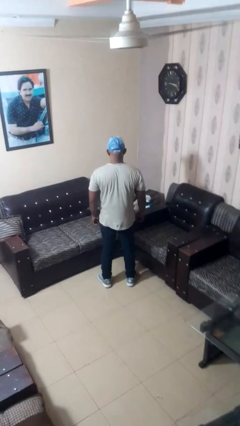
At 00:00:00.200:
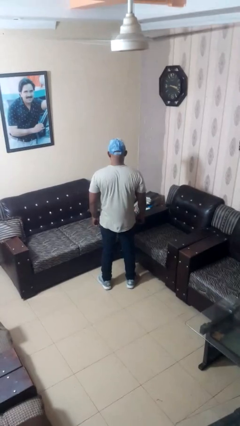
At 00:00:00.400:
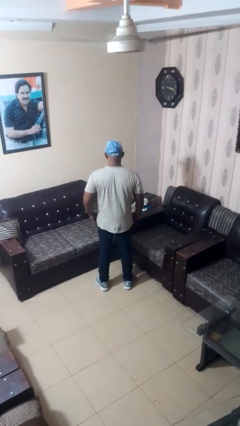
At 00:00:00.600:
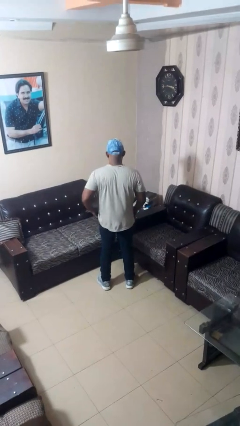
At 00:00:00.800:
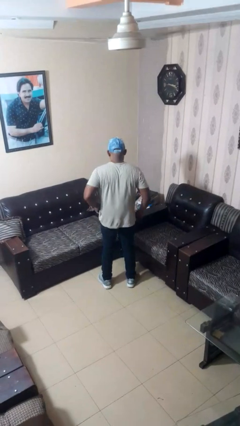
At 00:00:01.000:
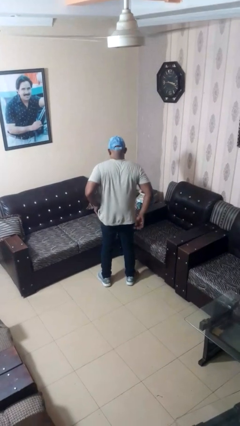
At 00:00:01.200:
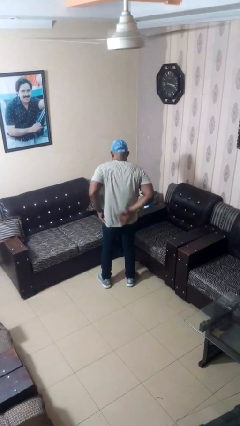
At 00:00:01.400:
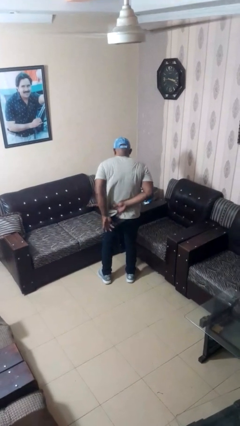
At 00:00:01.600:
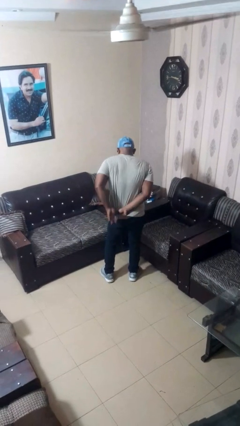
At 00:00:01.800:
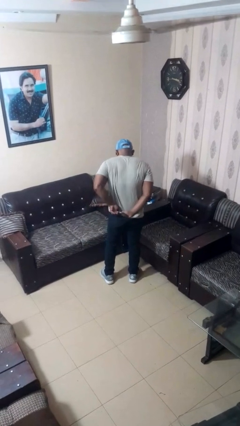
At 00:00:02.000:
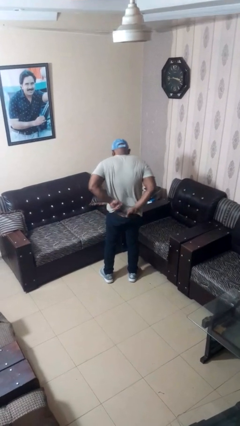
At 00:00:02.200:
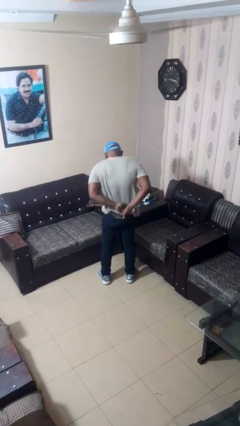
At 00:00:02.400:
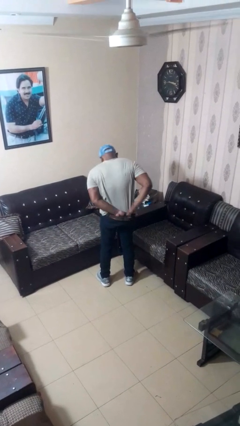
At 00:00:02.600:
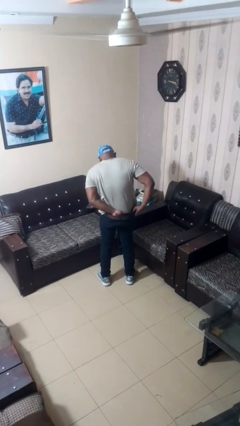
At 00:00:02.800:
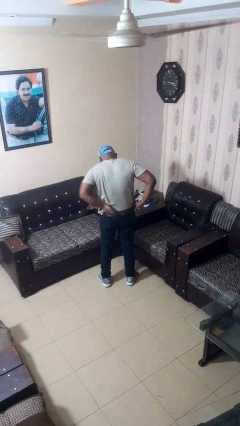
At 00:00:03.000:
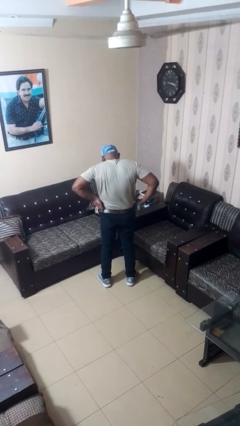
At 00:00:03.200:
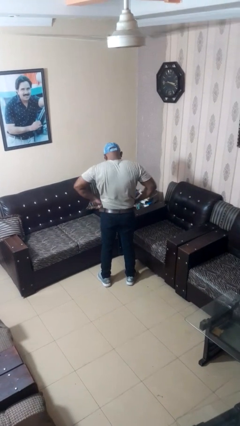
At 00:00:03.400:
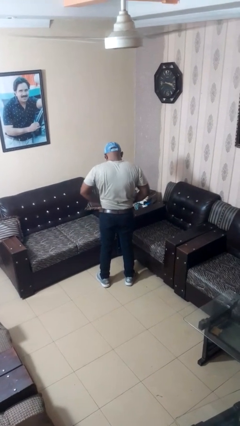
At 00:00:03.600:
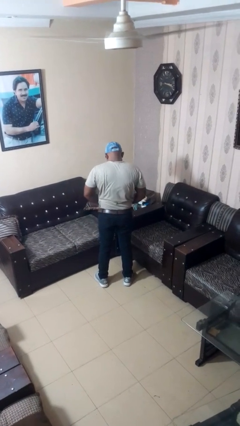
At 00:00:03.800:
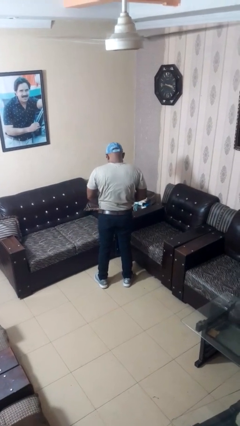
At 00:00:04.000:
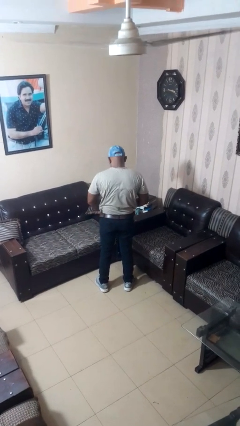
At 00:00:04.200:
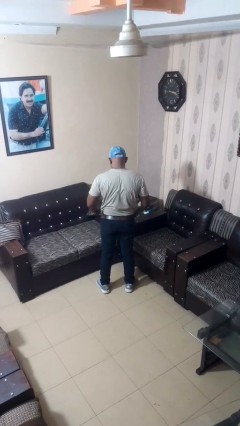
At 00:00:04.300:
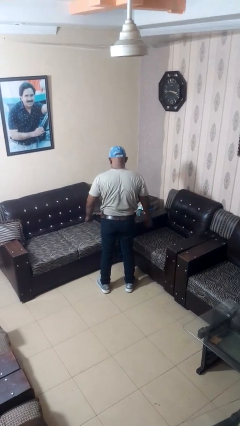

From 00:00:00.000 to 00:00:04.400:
person tucks in shirt

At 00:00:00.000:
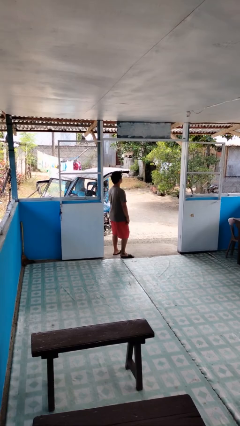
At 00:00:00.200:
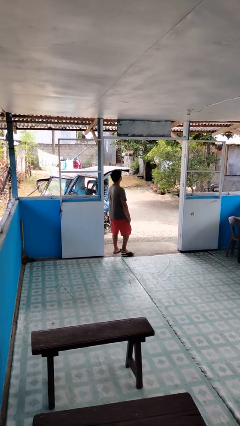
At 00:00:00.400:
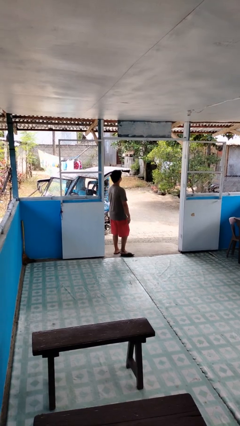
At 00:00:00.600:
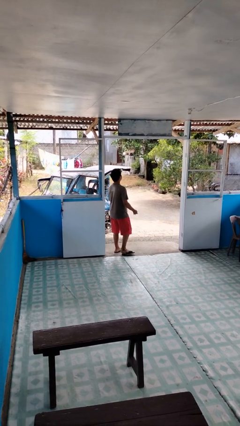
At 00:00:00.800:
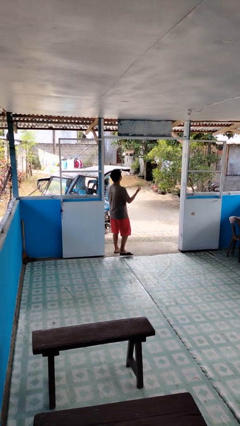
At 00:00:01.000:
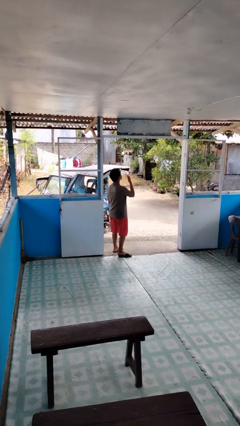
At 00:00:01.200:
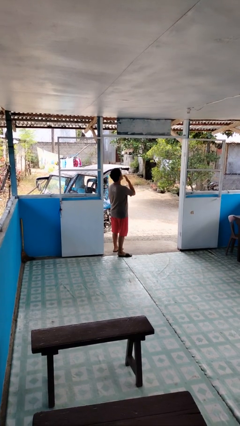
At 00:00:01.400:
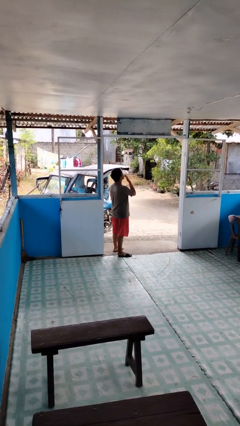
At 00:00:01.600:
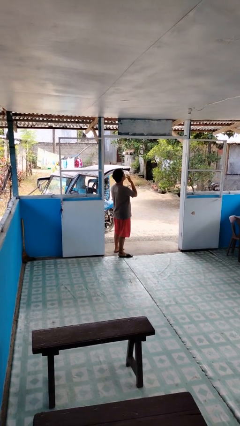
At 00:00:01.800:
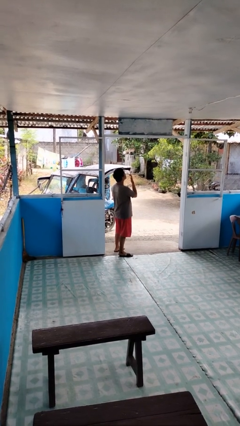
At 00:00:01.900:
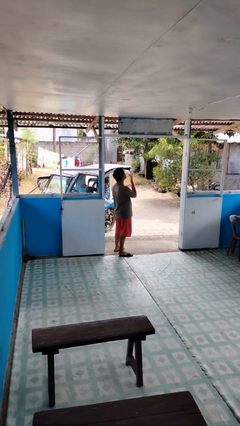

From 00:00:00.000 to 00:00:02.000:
person licks fingers

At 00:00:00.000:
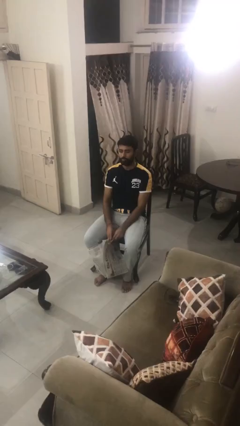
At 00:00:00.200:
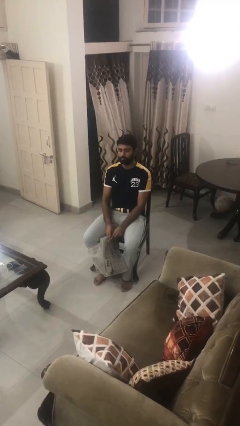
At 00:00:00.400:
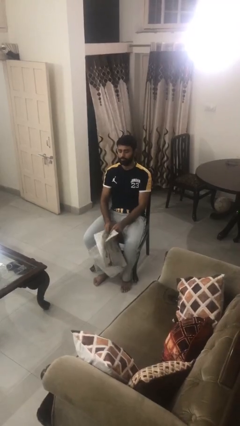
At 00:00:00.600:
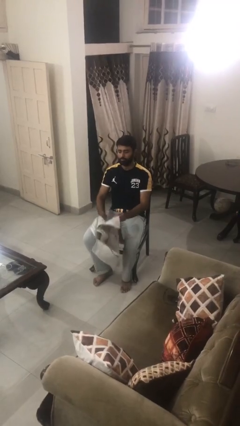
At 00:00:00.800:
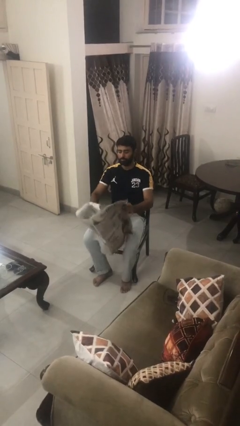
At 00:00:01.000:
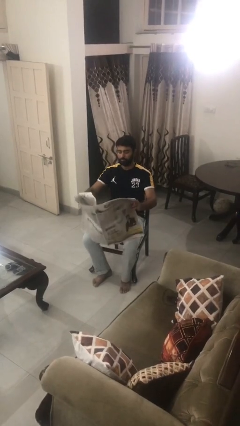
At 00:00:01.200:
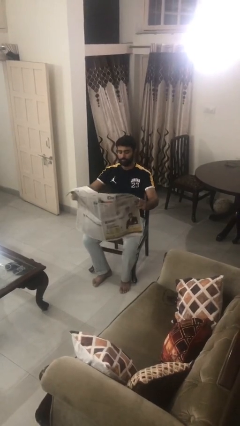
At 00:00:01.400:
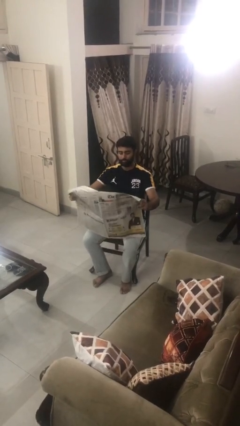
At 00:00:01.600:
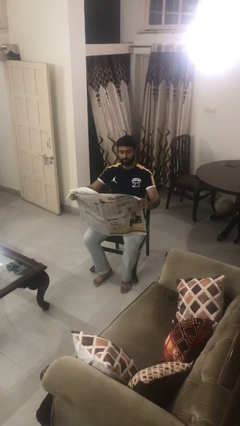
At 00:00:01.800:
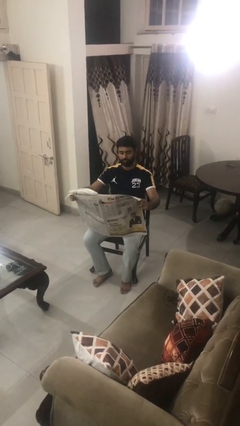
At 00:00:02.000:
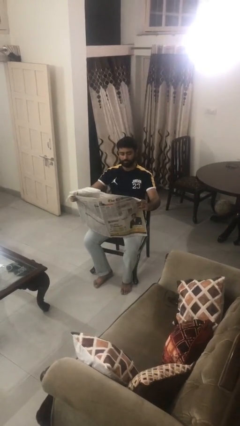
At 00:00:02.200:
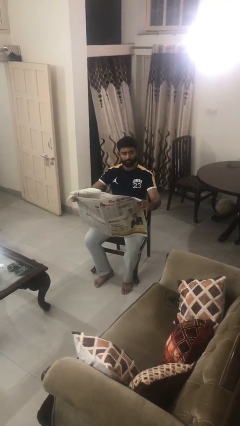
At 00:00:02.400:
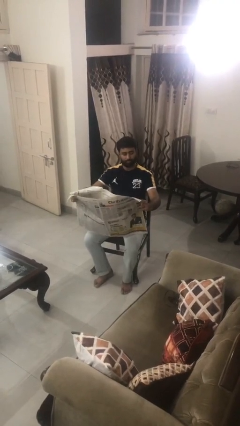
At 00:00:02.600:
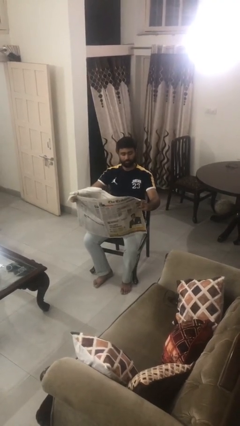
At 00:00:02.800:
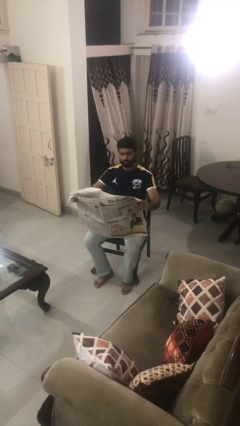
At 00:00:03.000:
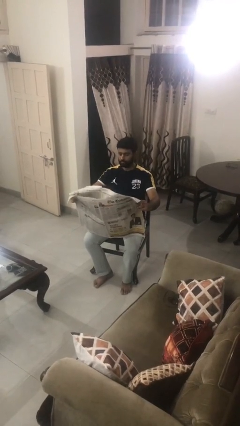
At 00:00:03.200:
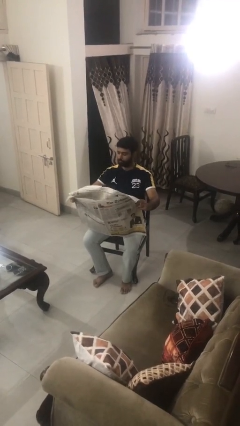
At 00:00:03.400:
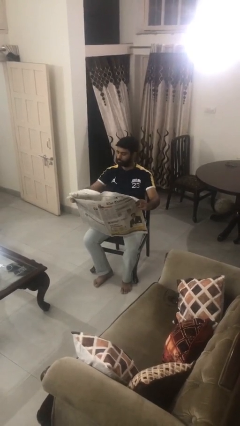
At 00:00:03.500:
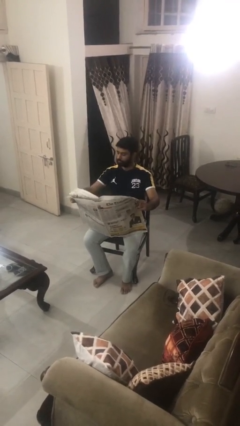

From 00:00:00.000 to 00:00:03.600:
person reads newspaper

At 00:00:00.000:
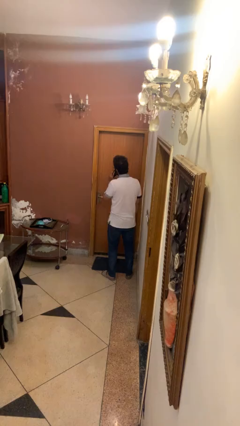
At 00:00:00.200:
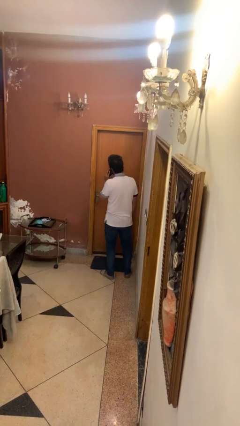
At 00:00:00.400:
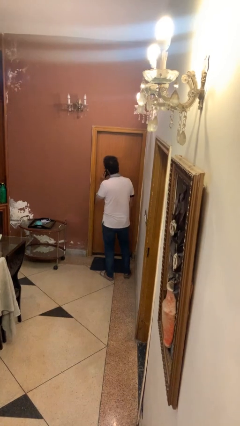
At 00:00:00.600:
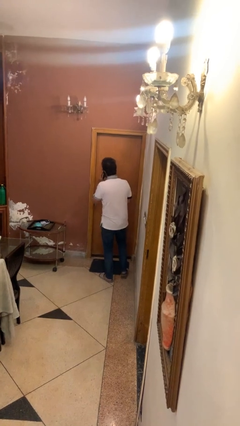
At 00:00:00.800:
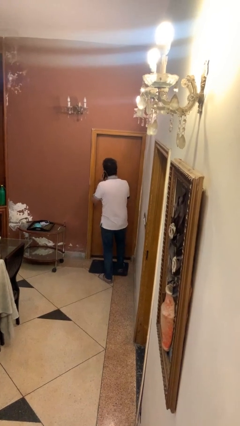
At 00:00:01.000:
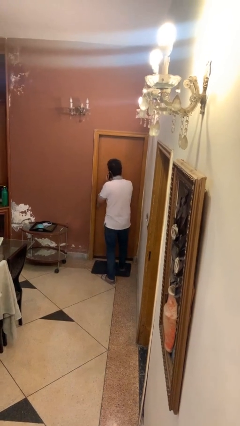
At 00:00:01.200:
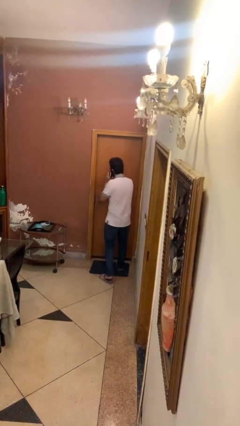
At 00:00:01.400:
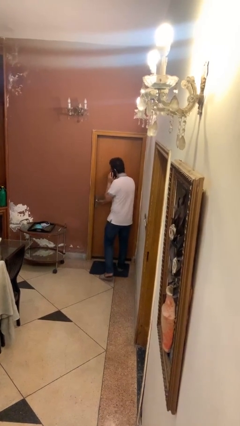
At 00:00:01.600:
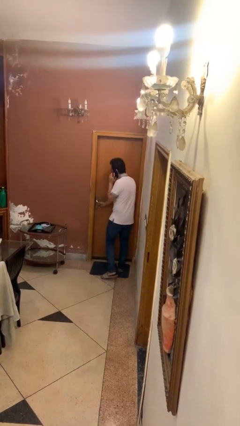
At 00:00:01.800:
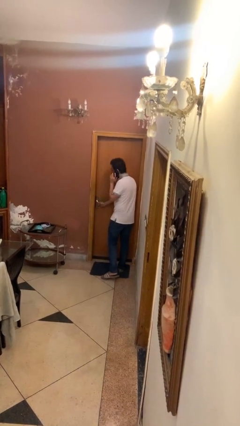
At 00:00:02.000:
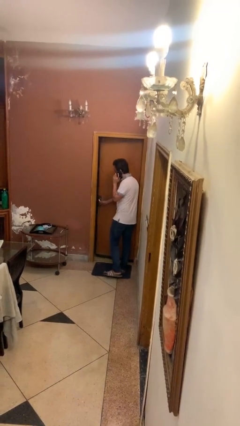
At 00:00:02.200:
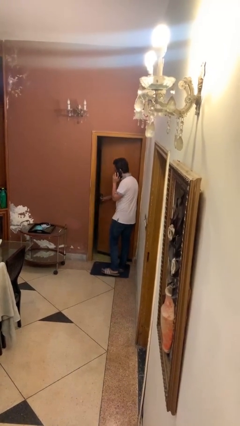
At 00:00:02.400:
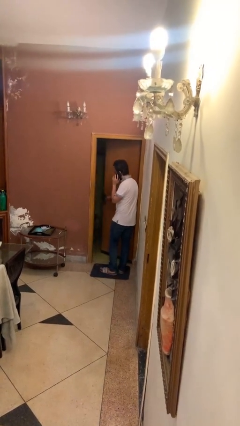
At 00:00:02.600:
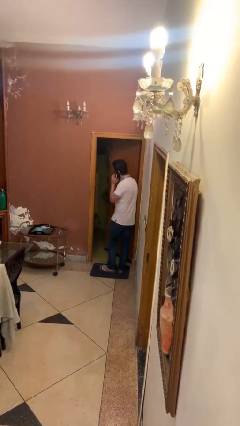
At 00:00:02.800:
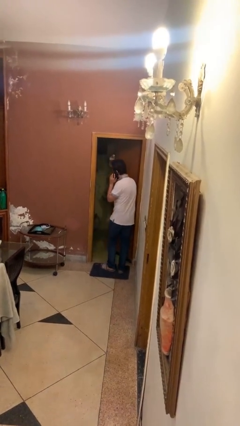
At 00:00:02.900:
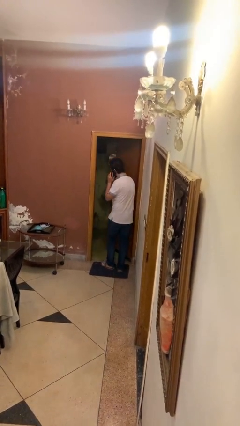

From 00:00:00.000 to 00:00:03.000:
person opens facility door

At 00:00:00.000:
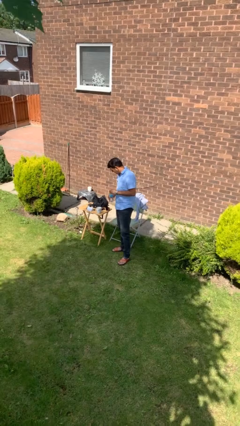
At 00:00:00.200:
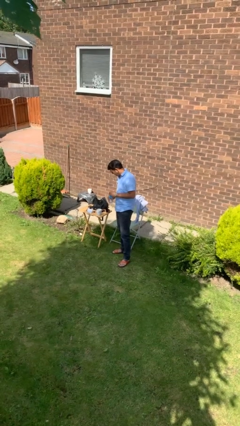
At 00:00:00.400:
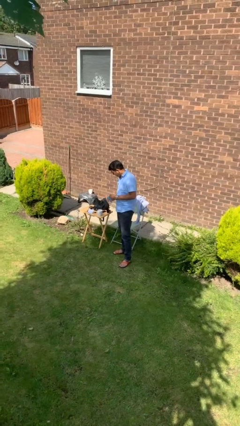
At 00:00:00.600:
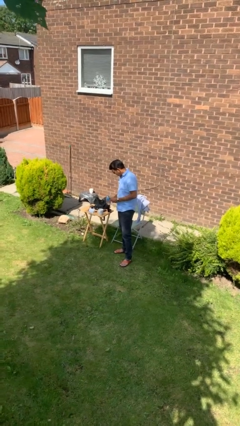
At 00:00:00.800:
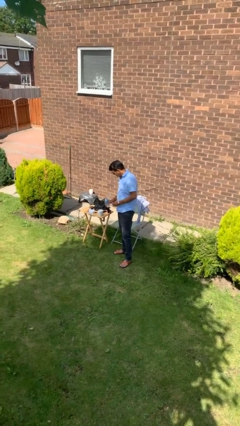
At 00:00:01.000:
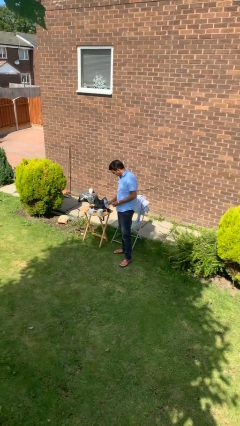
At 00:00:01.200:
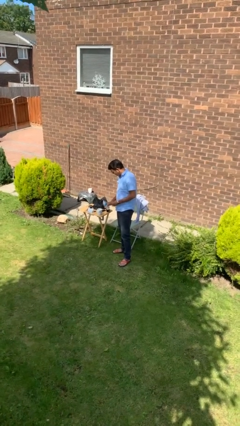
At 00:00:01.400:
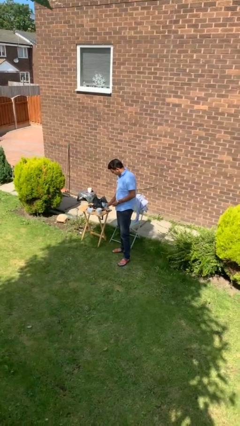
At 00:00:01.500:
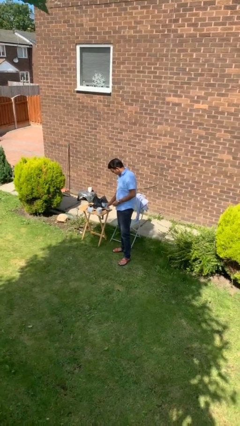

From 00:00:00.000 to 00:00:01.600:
person unscrews lid from bottle

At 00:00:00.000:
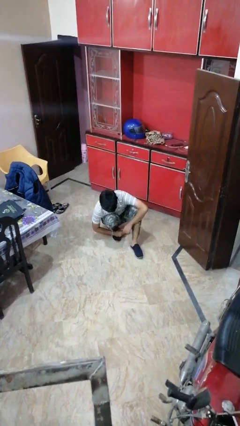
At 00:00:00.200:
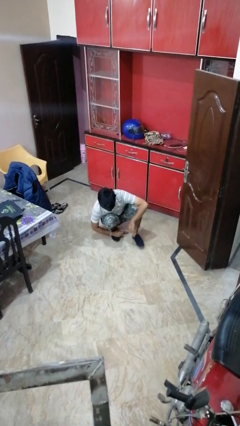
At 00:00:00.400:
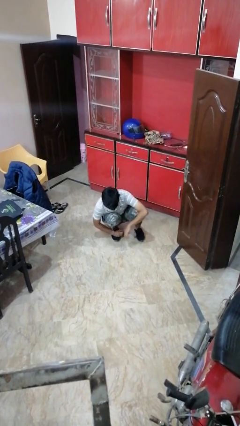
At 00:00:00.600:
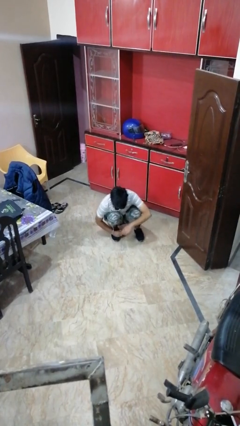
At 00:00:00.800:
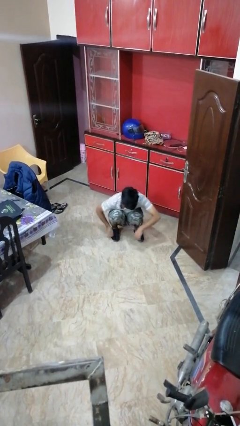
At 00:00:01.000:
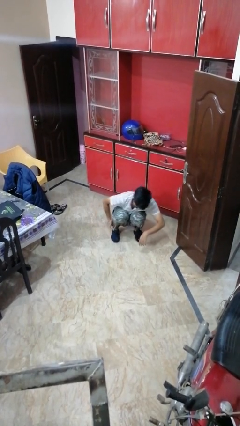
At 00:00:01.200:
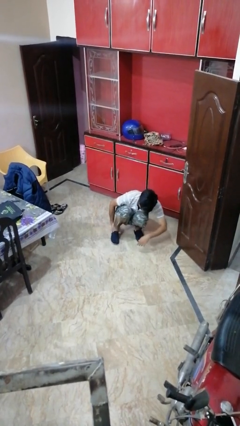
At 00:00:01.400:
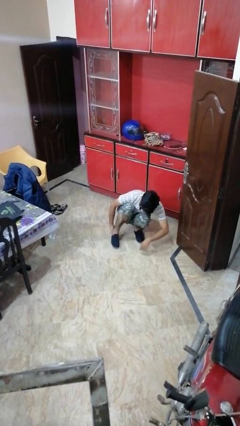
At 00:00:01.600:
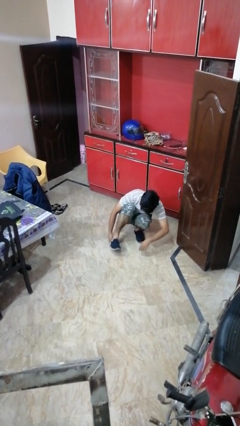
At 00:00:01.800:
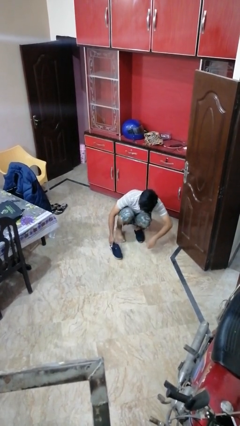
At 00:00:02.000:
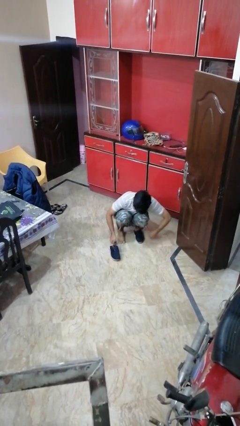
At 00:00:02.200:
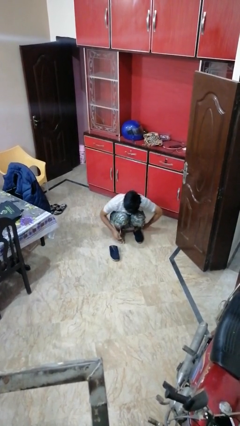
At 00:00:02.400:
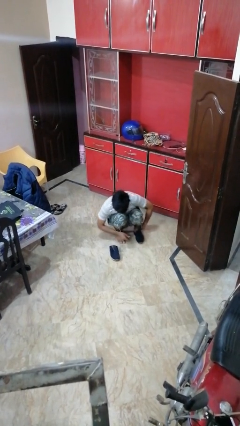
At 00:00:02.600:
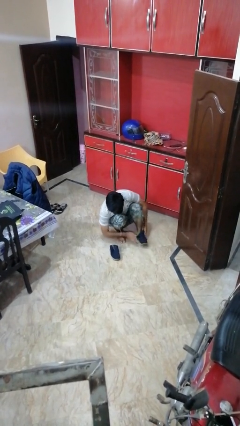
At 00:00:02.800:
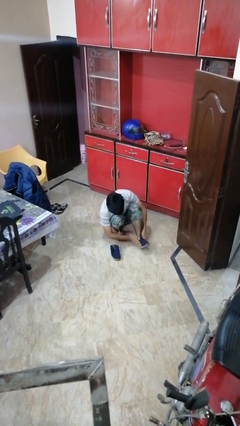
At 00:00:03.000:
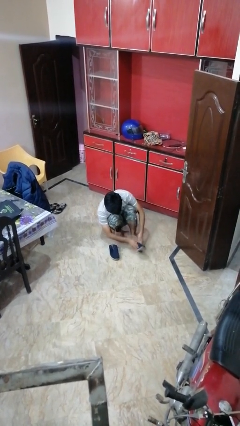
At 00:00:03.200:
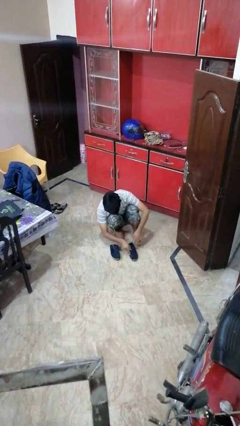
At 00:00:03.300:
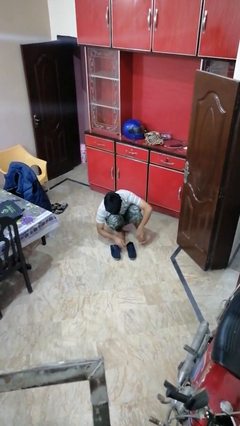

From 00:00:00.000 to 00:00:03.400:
person takes off shoes
